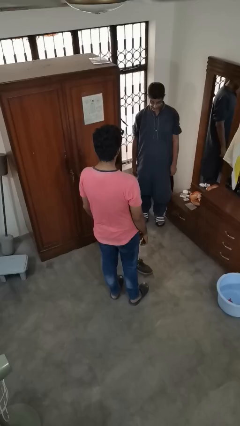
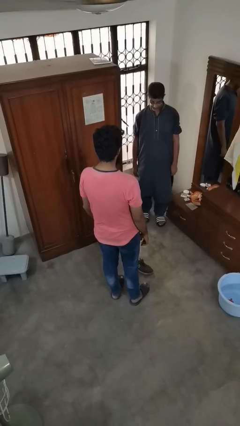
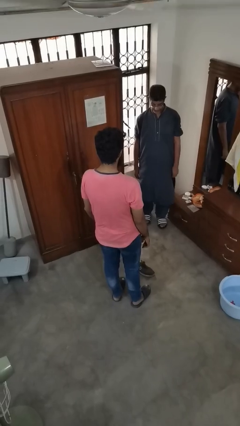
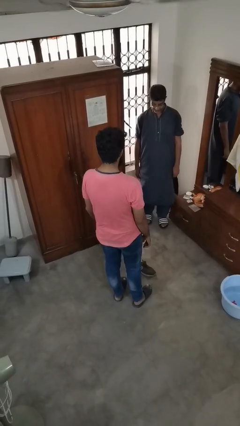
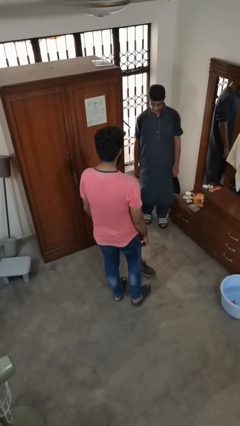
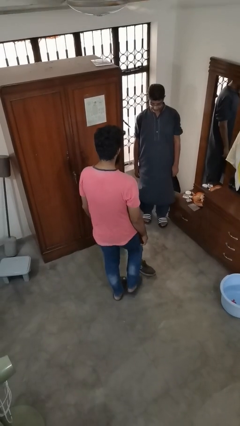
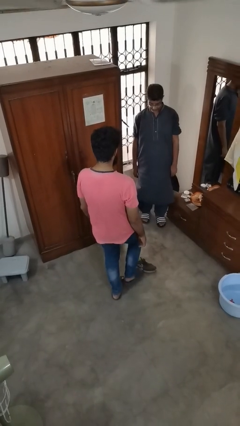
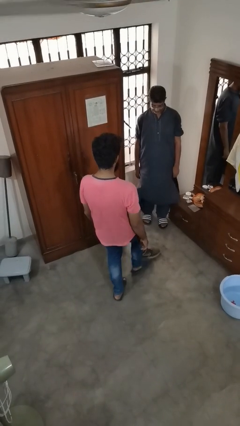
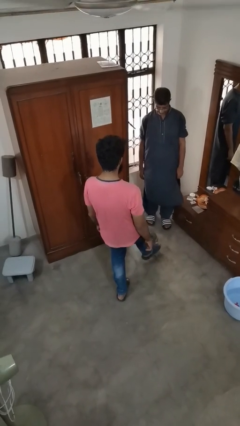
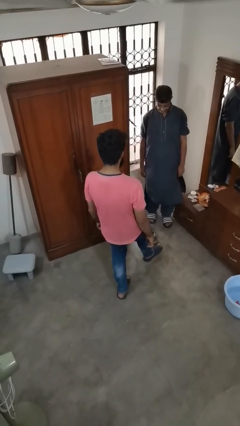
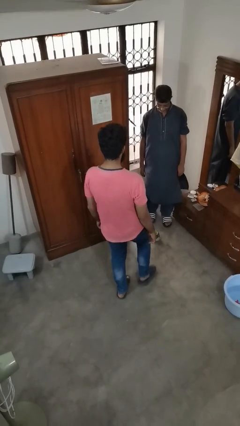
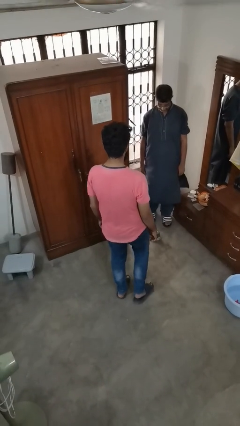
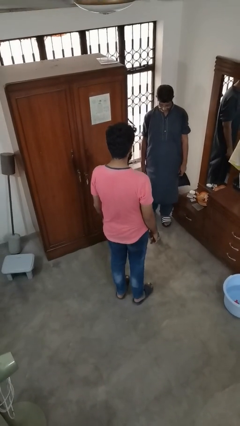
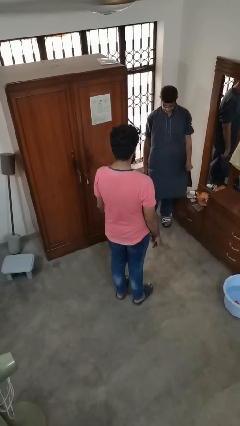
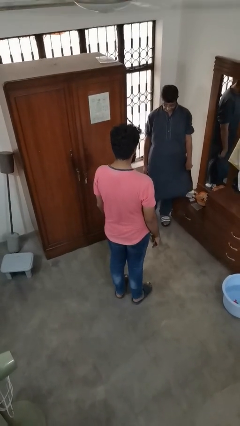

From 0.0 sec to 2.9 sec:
person kicks object to person

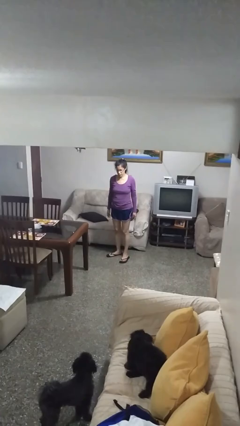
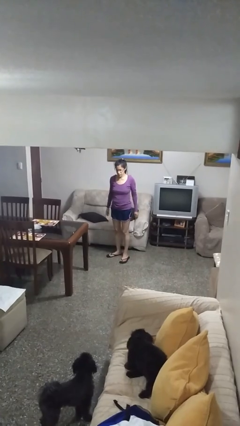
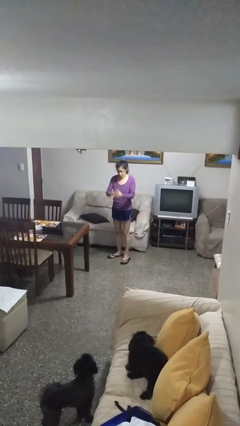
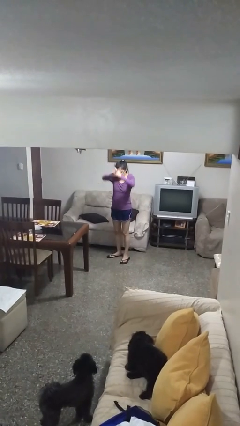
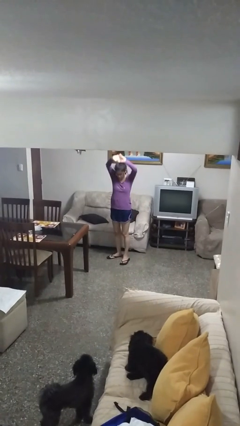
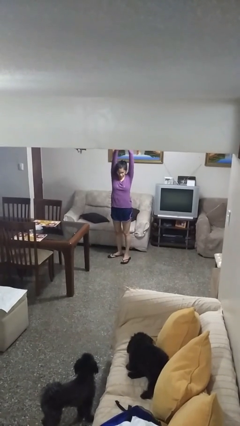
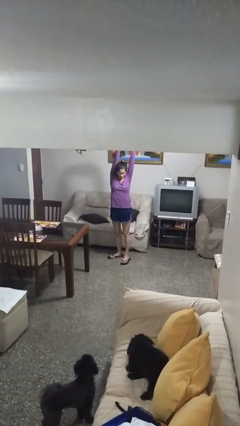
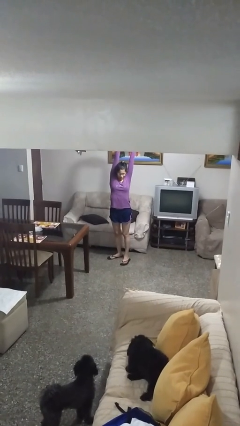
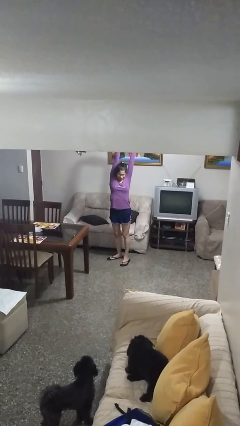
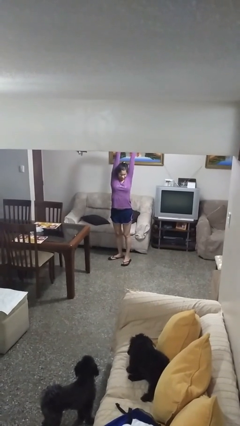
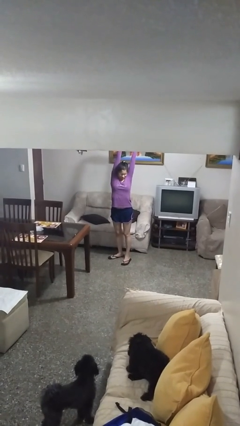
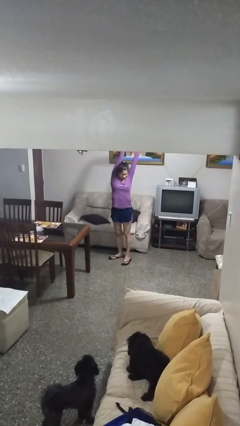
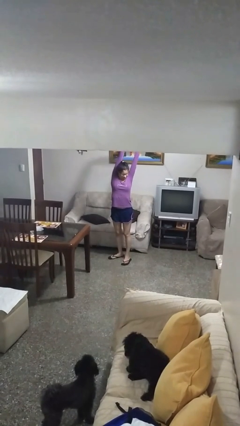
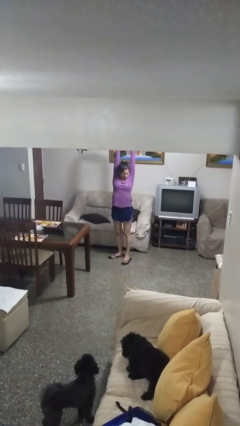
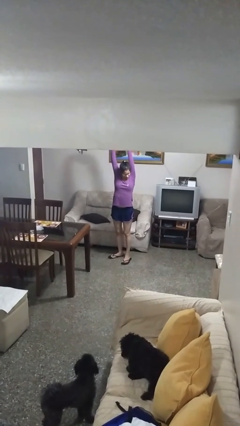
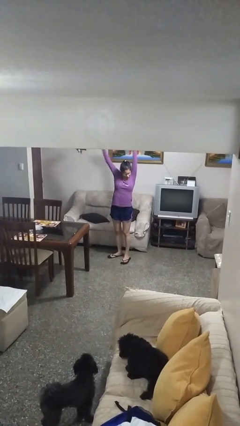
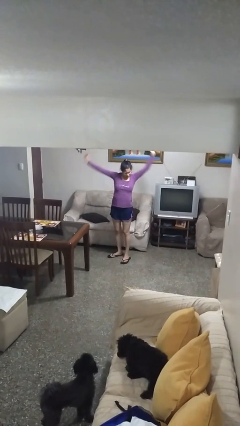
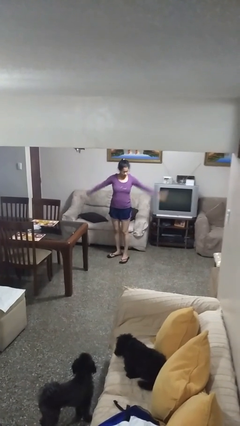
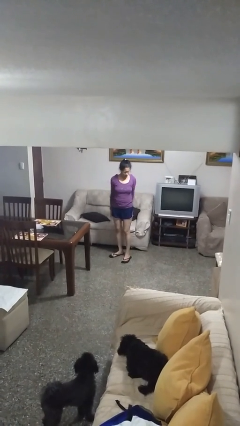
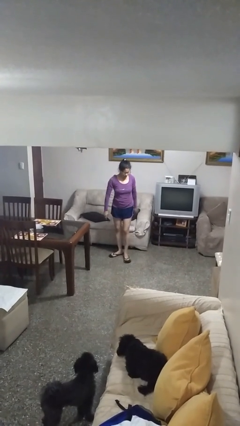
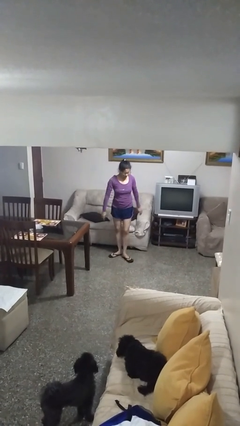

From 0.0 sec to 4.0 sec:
person stretches arms over head

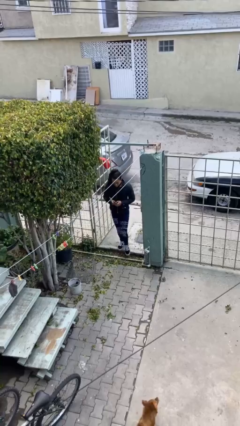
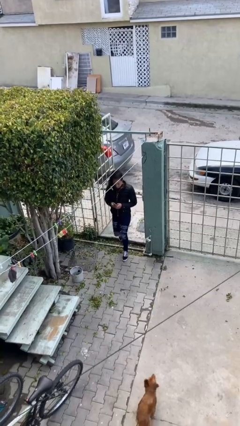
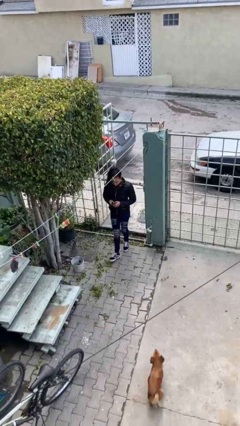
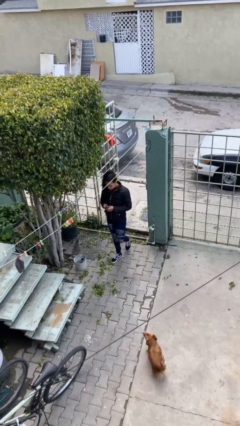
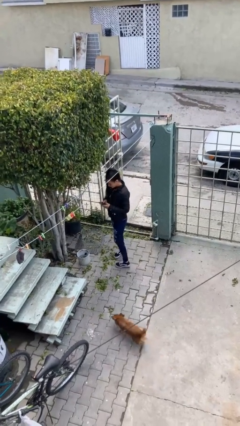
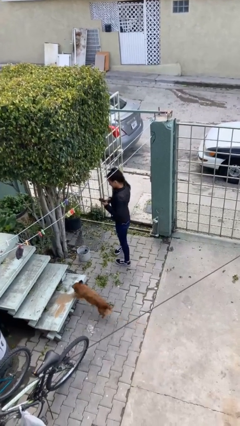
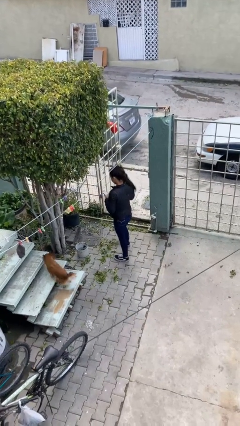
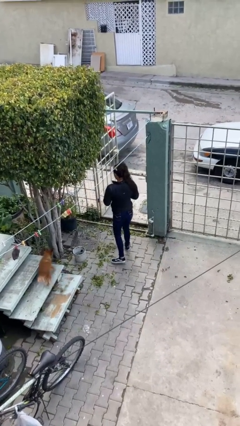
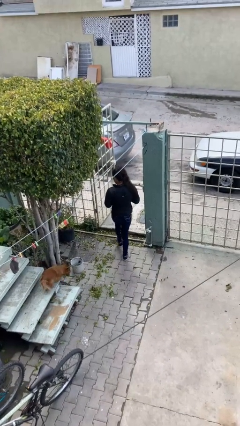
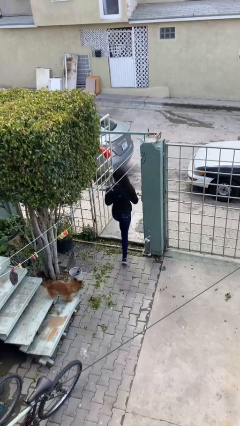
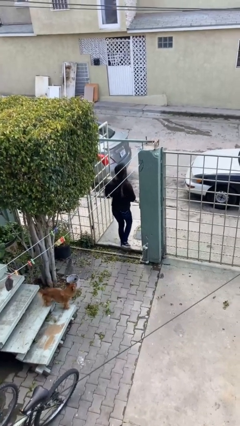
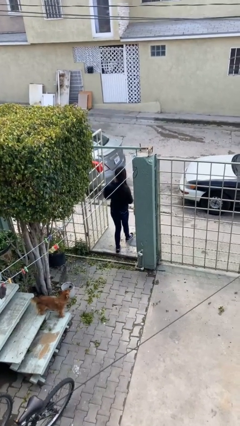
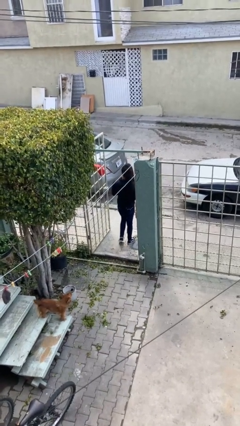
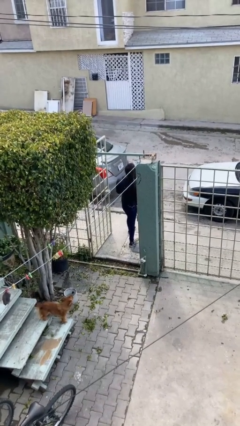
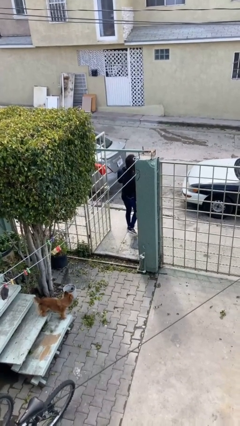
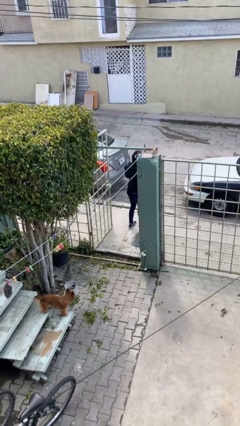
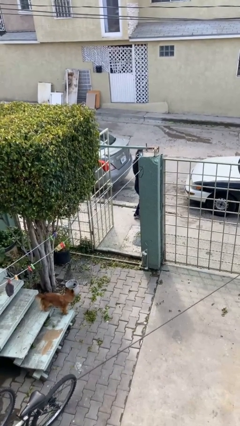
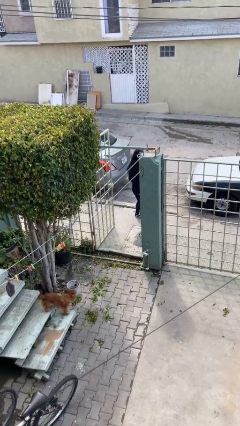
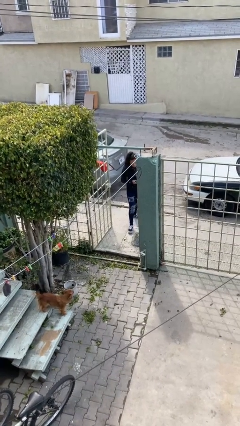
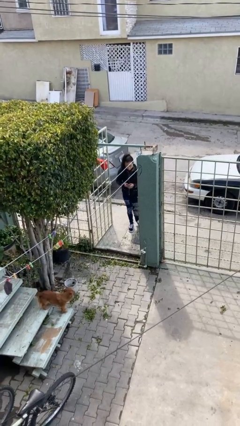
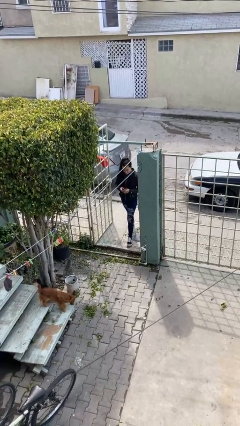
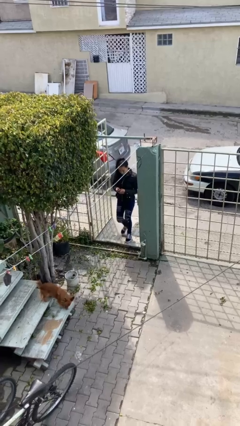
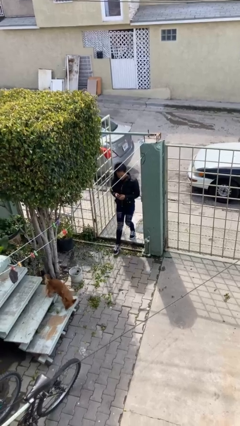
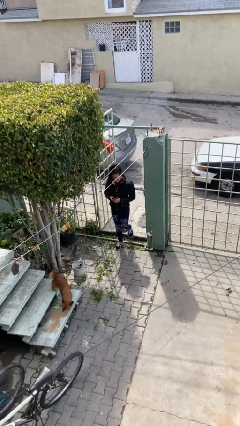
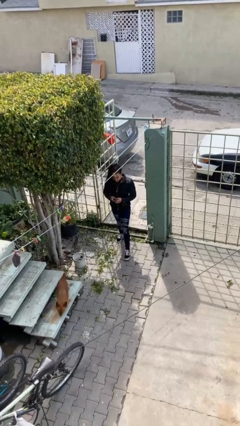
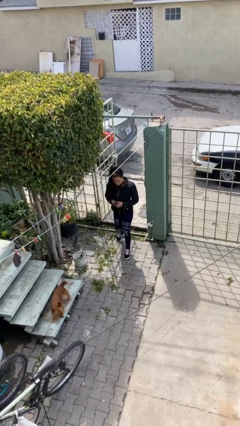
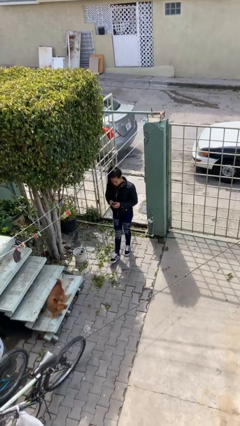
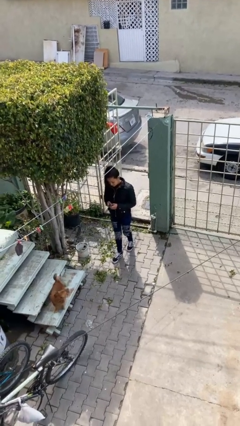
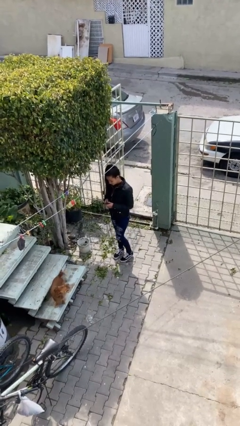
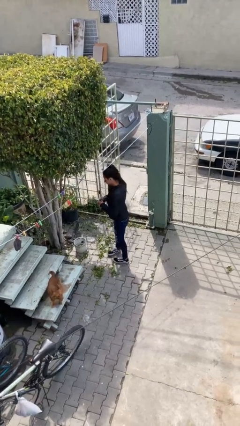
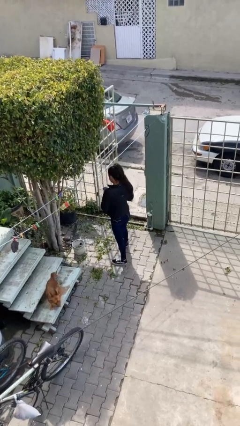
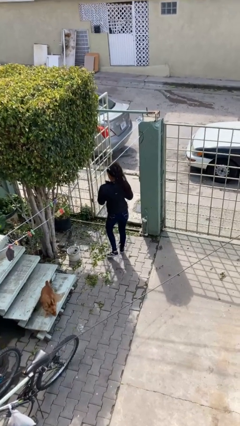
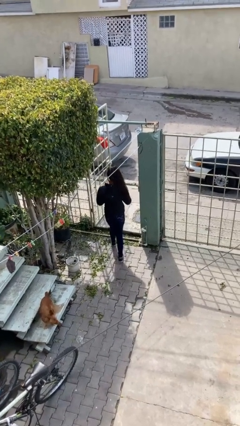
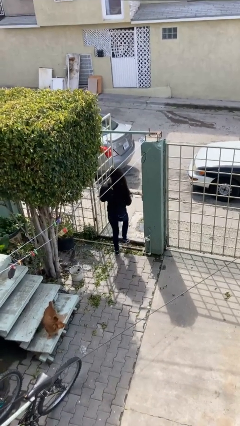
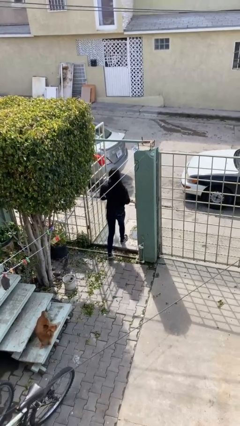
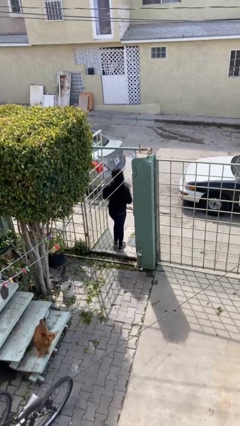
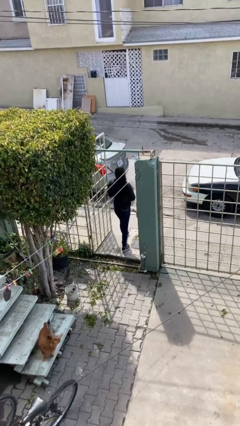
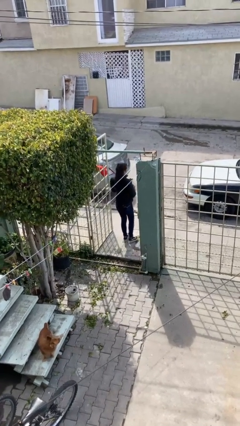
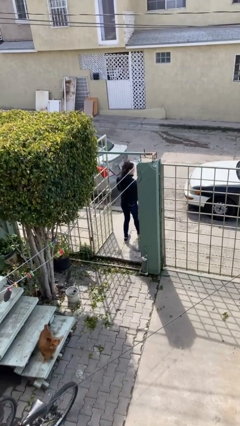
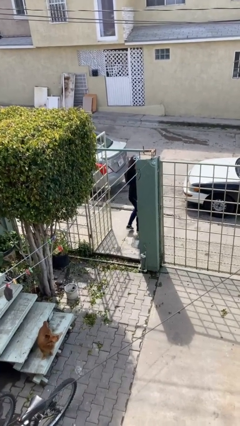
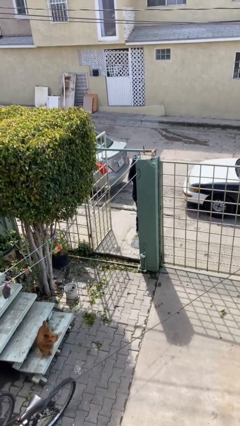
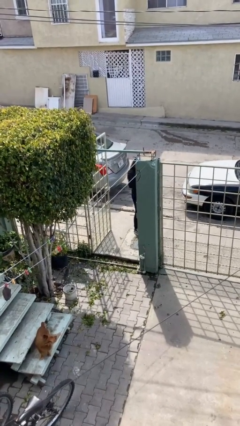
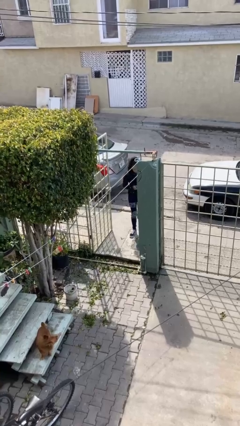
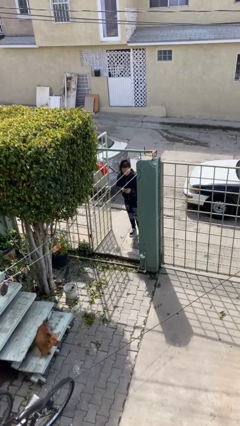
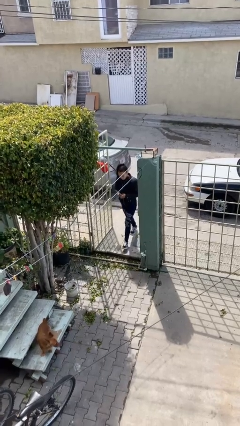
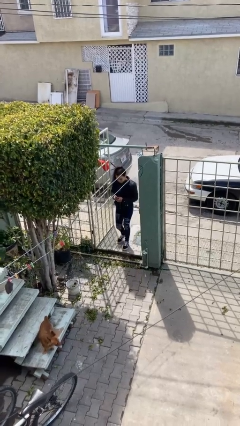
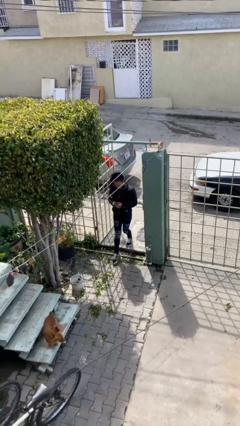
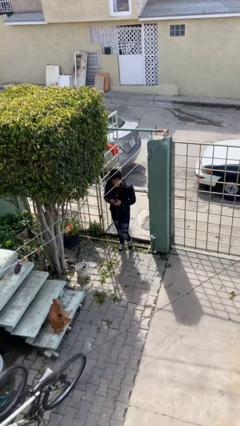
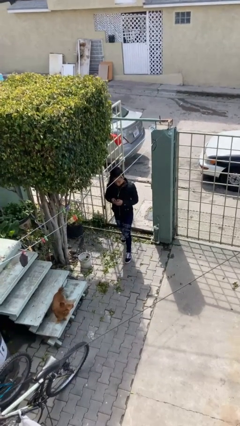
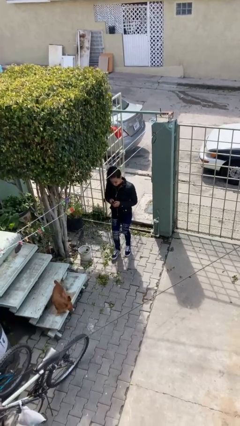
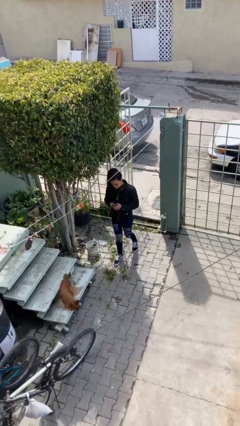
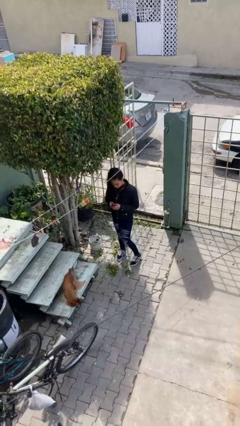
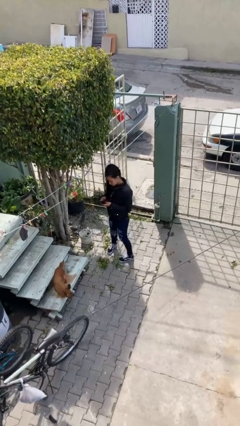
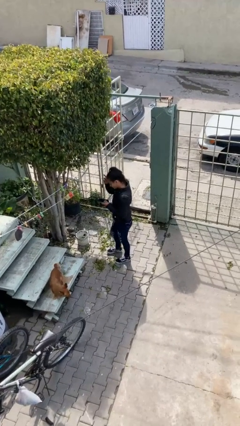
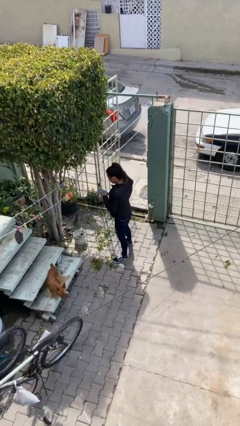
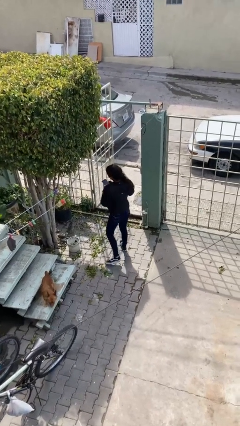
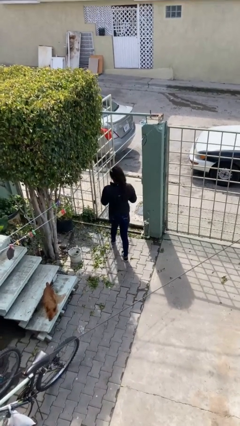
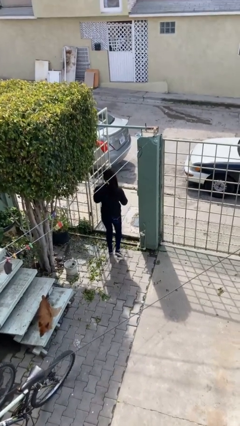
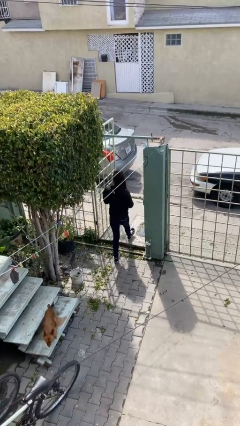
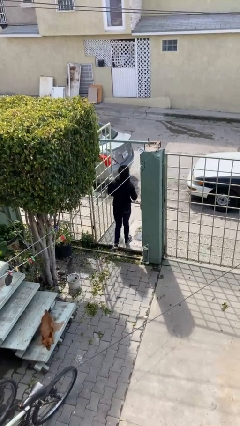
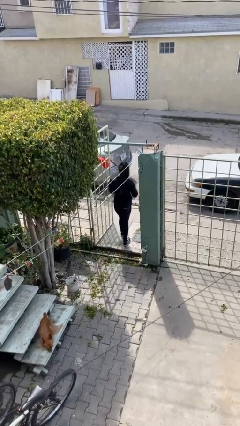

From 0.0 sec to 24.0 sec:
person texts on phone
